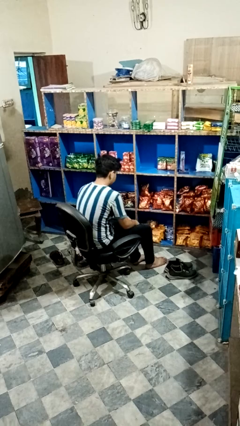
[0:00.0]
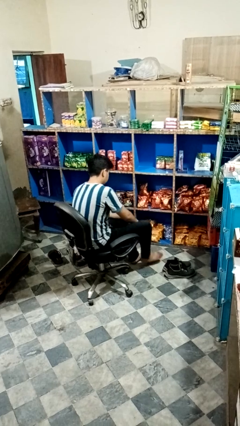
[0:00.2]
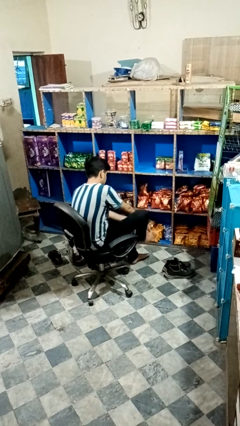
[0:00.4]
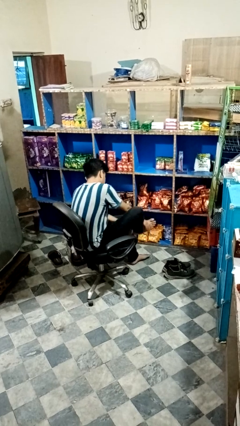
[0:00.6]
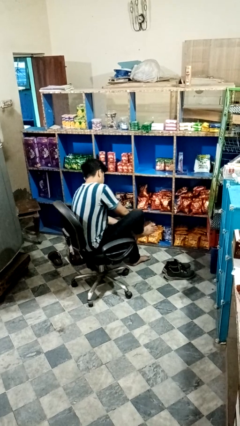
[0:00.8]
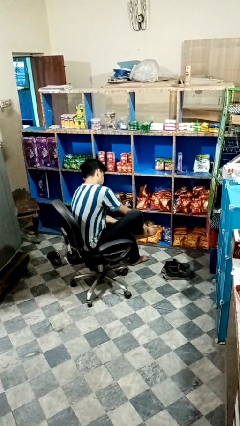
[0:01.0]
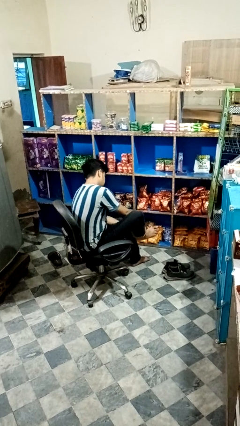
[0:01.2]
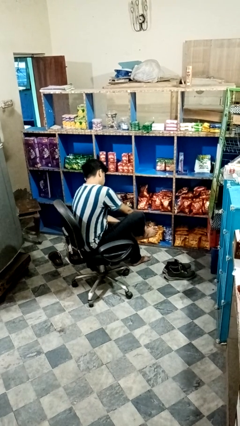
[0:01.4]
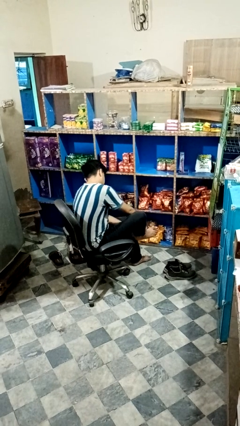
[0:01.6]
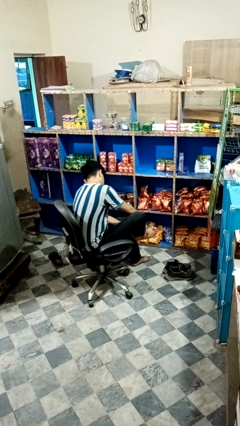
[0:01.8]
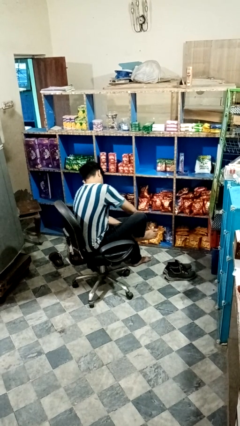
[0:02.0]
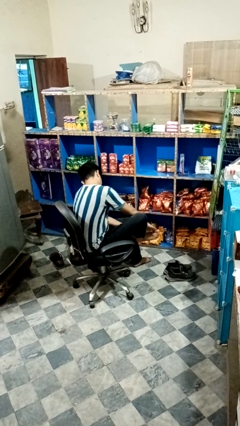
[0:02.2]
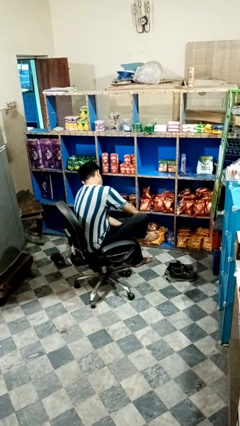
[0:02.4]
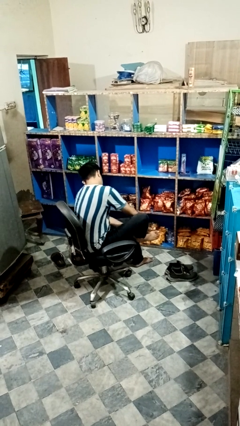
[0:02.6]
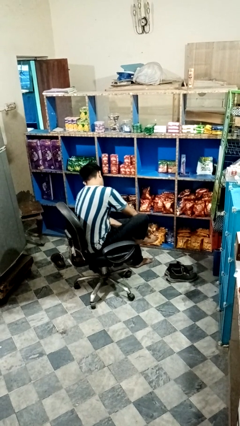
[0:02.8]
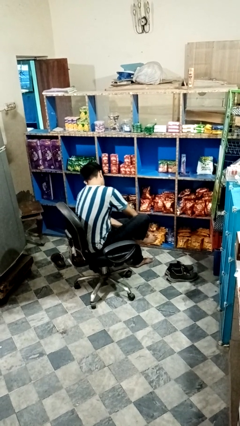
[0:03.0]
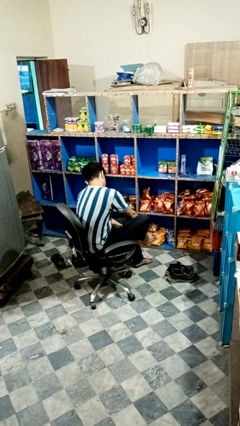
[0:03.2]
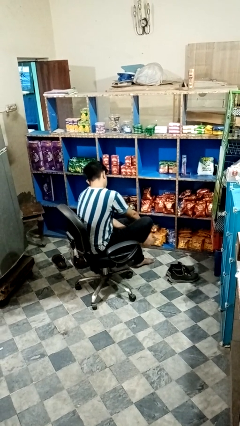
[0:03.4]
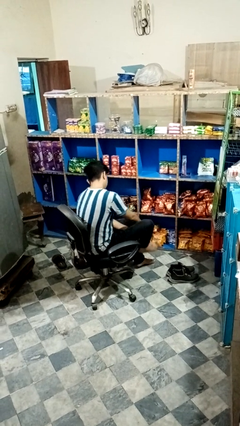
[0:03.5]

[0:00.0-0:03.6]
person rubs foot

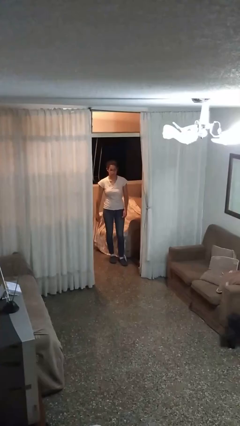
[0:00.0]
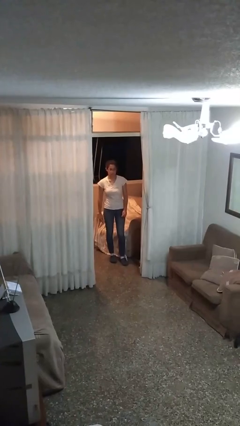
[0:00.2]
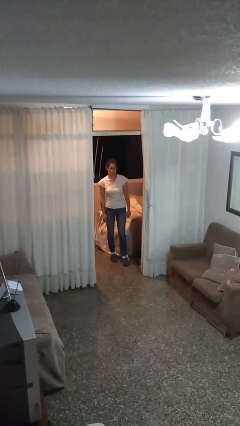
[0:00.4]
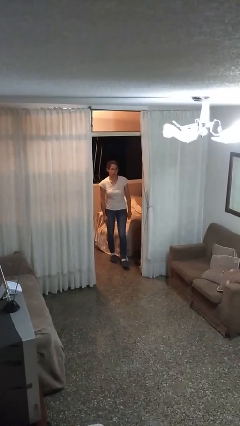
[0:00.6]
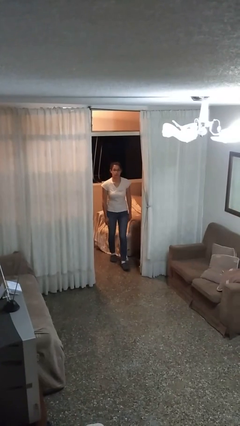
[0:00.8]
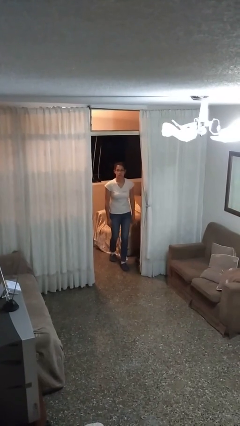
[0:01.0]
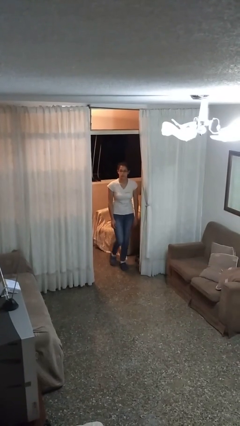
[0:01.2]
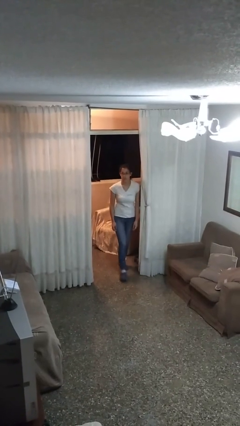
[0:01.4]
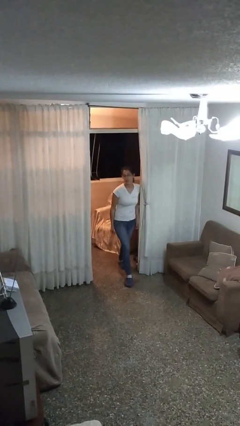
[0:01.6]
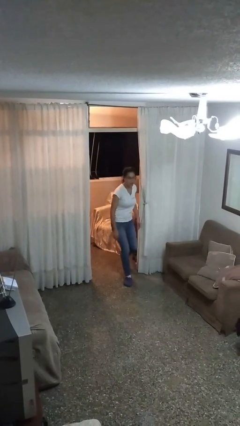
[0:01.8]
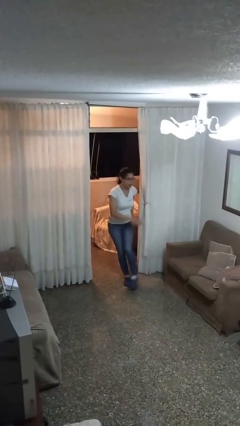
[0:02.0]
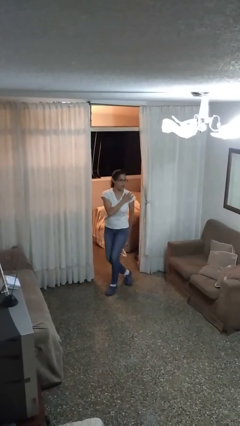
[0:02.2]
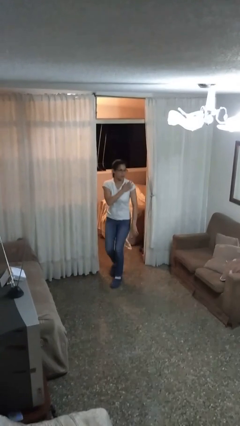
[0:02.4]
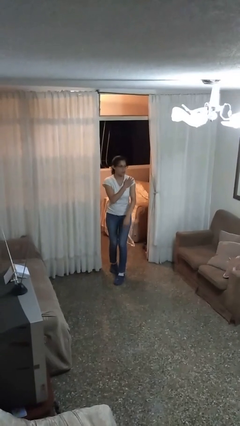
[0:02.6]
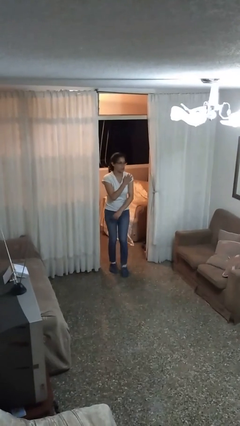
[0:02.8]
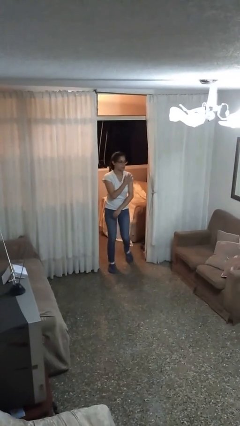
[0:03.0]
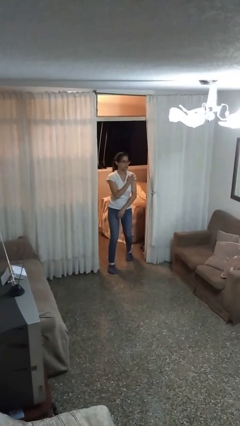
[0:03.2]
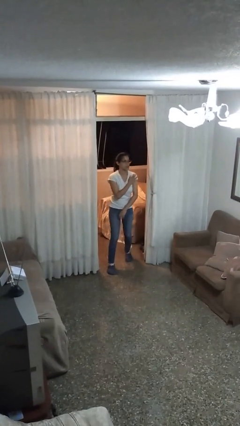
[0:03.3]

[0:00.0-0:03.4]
person bumps into wall

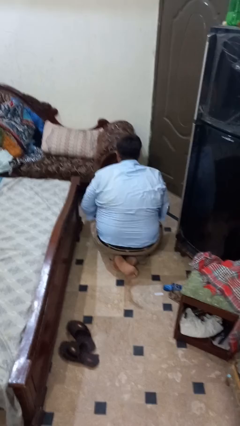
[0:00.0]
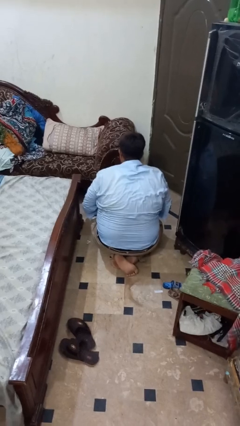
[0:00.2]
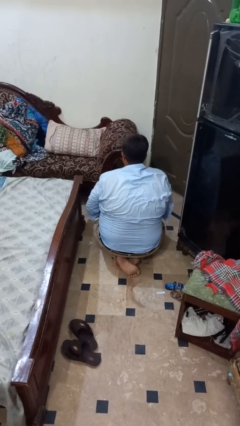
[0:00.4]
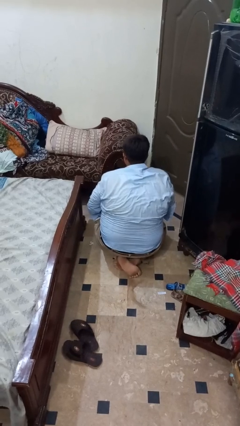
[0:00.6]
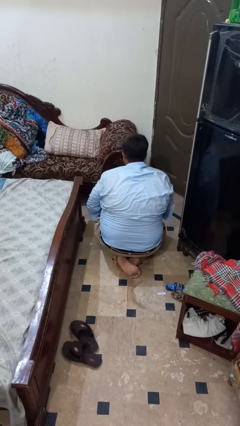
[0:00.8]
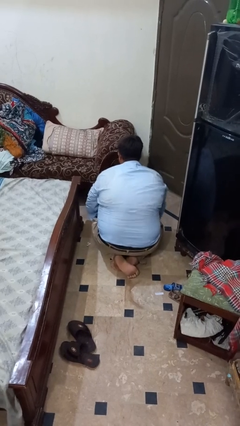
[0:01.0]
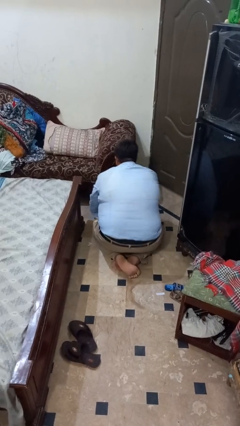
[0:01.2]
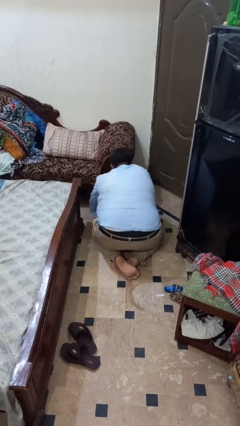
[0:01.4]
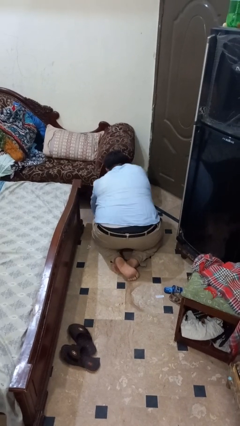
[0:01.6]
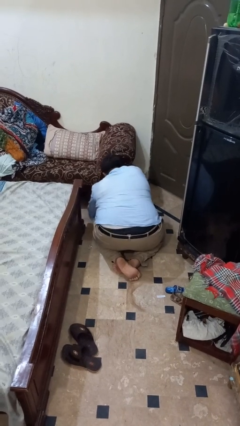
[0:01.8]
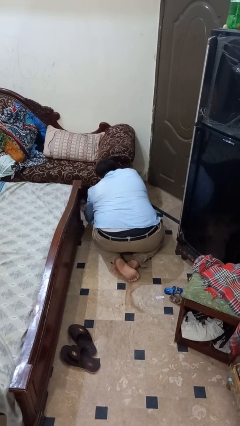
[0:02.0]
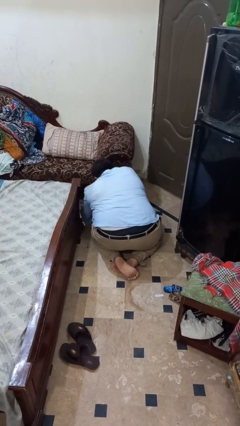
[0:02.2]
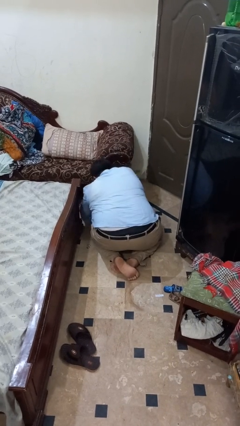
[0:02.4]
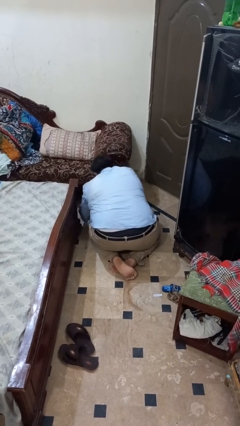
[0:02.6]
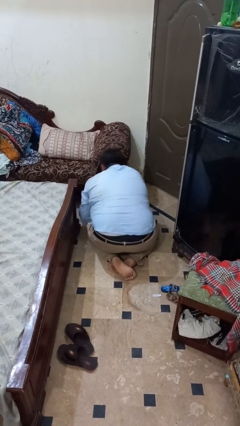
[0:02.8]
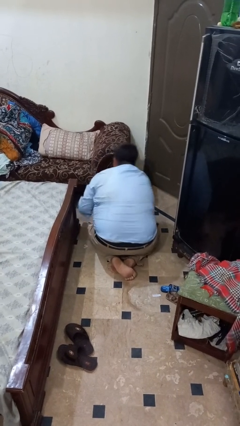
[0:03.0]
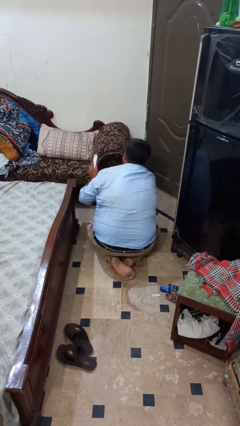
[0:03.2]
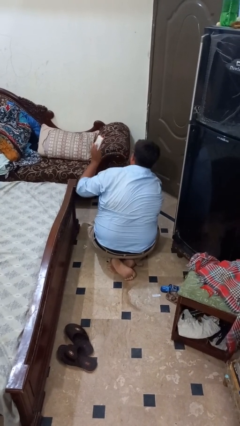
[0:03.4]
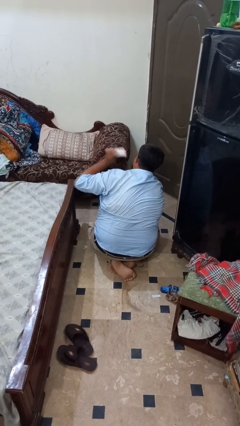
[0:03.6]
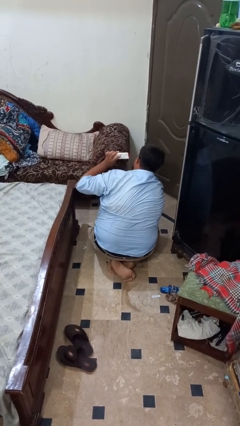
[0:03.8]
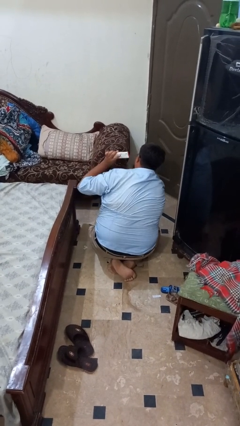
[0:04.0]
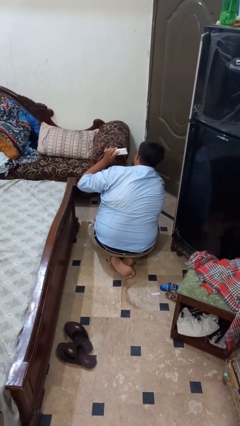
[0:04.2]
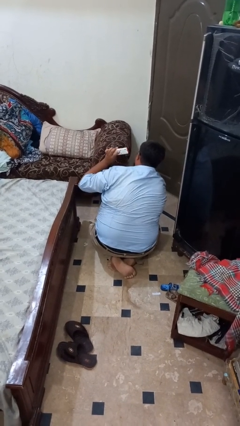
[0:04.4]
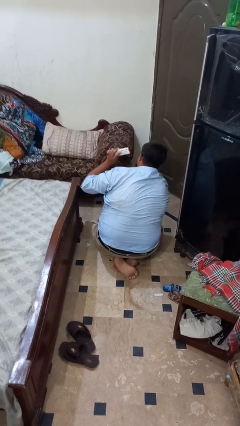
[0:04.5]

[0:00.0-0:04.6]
person searches under couch

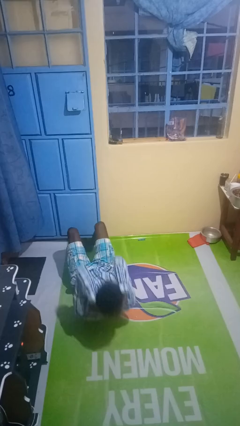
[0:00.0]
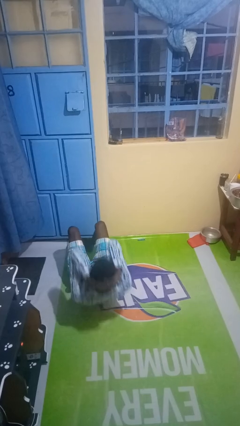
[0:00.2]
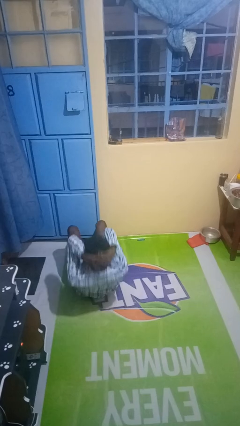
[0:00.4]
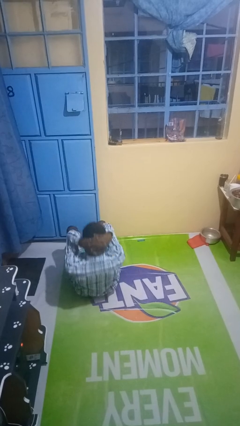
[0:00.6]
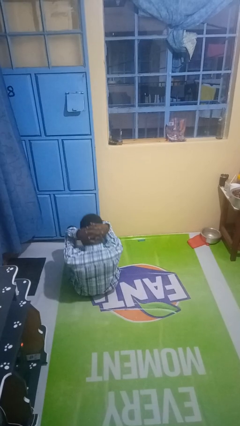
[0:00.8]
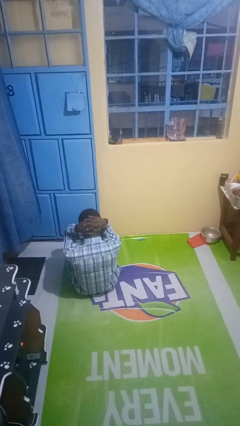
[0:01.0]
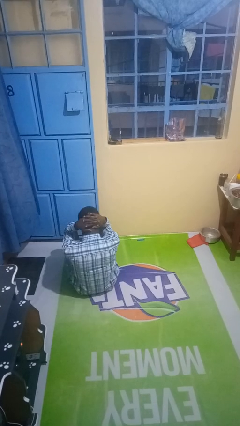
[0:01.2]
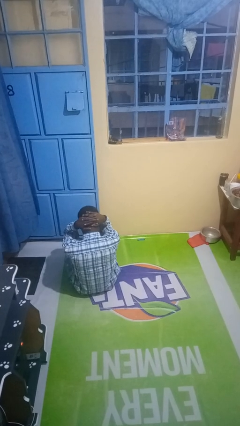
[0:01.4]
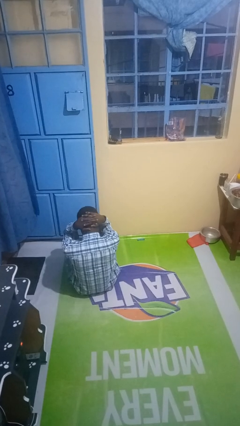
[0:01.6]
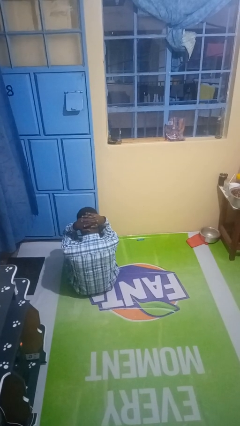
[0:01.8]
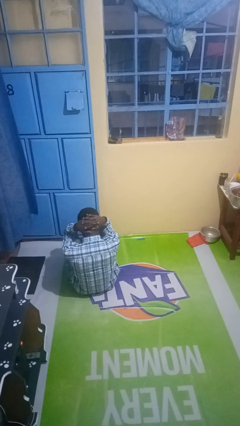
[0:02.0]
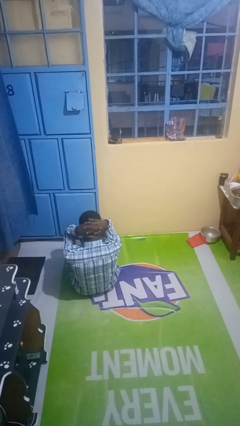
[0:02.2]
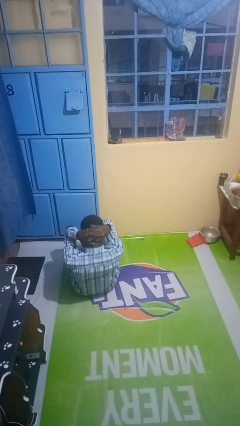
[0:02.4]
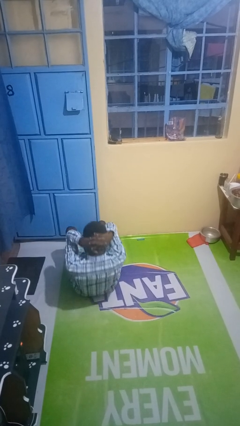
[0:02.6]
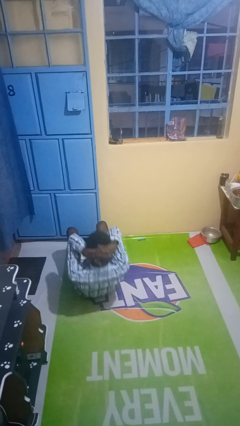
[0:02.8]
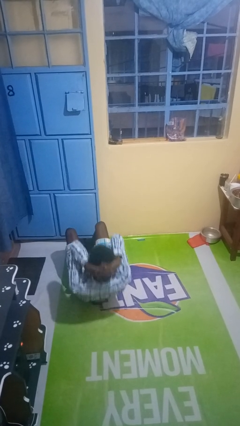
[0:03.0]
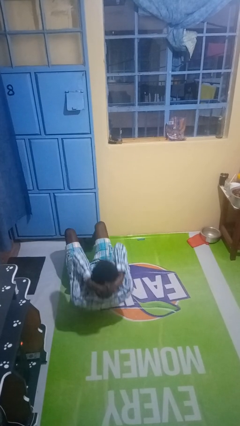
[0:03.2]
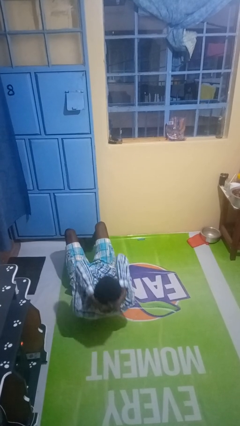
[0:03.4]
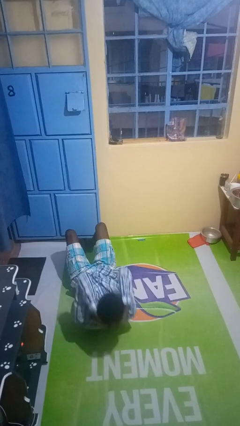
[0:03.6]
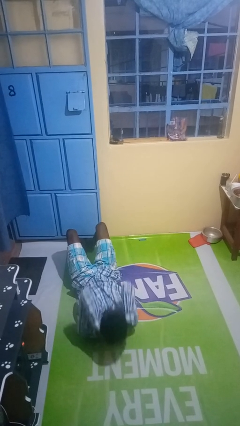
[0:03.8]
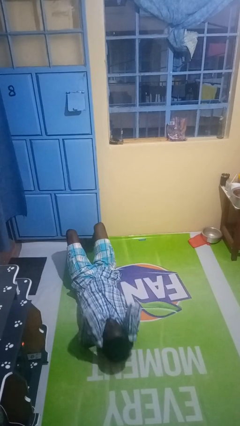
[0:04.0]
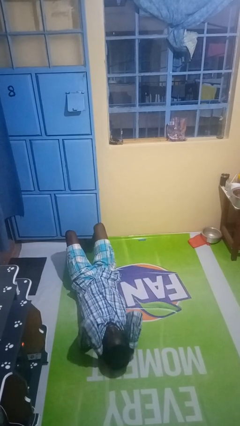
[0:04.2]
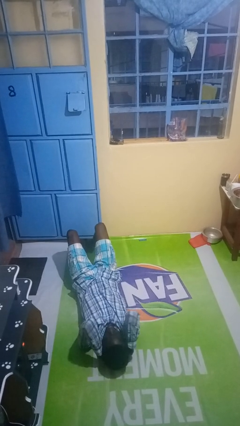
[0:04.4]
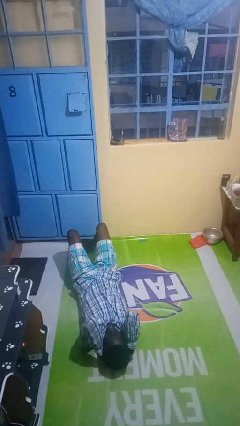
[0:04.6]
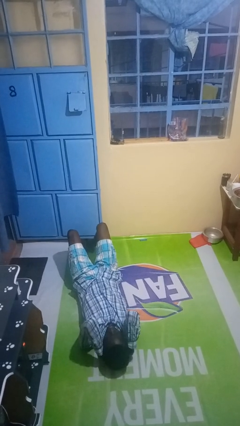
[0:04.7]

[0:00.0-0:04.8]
person exercises with situp

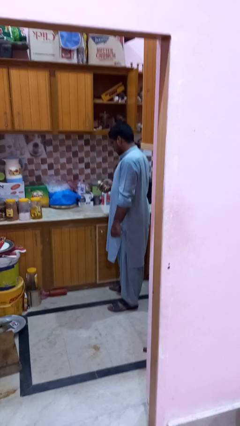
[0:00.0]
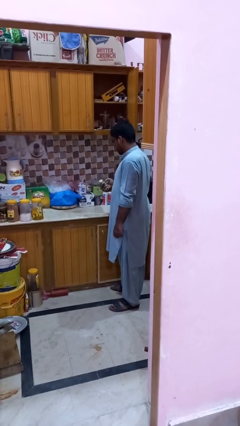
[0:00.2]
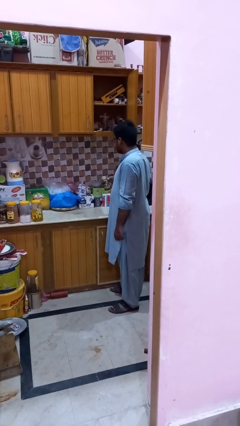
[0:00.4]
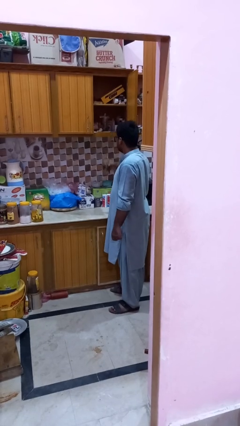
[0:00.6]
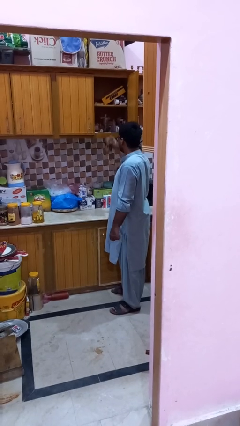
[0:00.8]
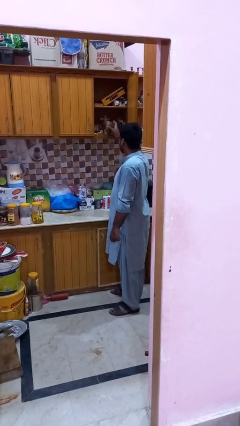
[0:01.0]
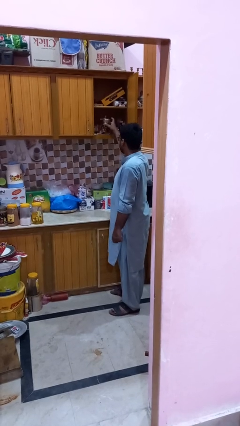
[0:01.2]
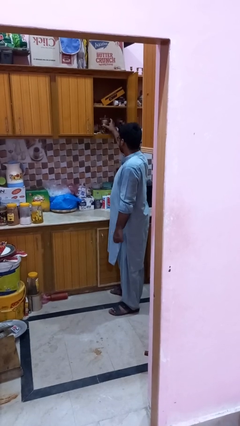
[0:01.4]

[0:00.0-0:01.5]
person puts down object into cabinet
